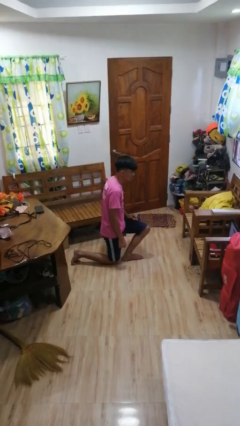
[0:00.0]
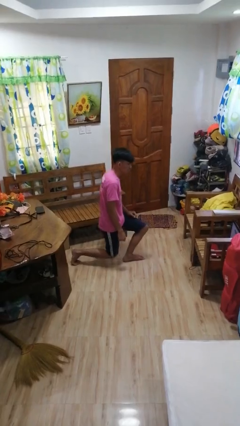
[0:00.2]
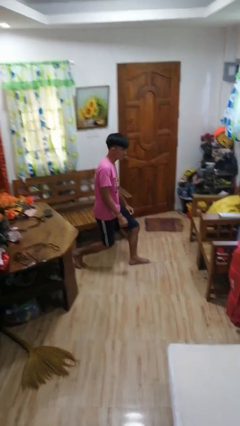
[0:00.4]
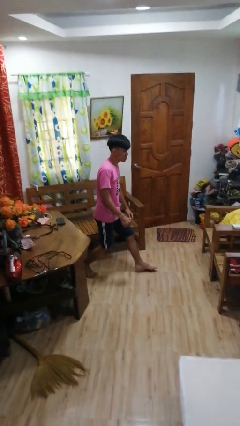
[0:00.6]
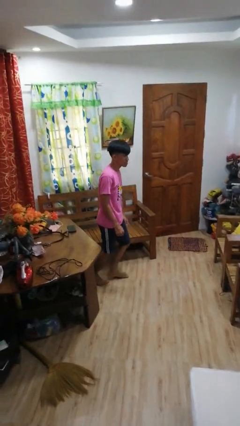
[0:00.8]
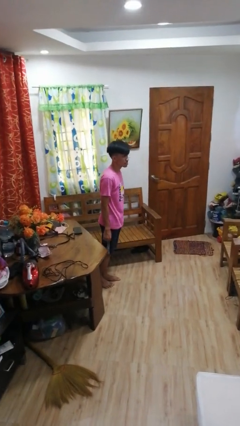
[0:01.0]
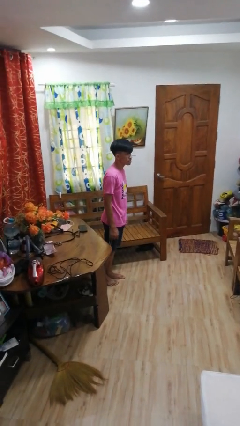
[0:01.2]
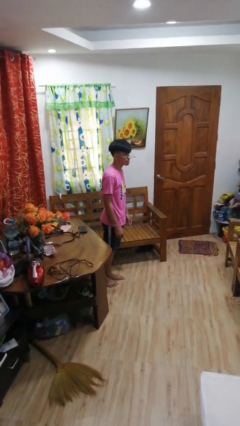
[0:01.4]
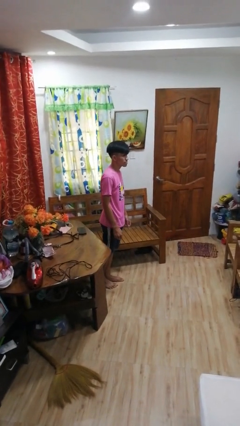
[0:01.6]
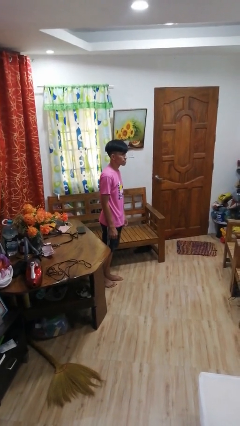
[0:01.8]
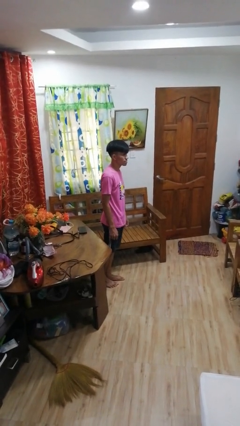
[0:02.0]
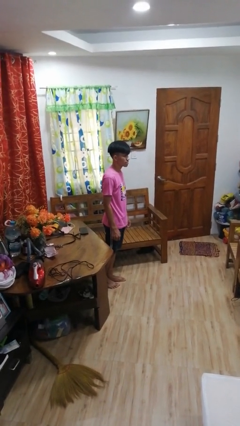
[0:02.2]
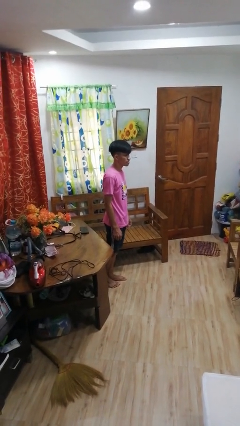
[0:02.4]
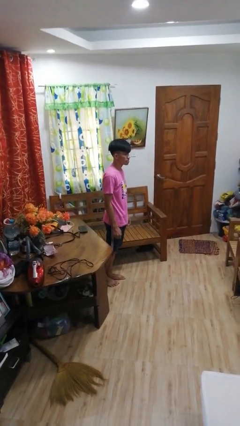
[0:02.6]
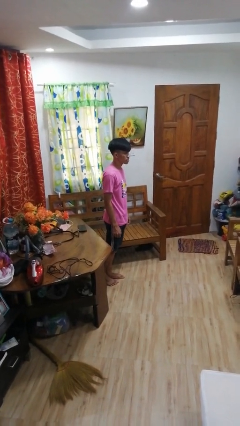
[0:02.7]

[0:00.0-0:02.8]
person stands up from floor

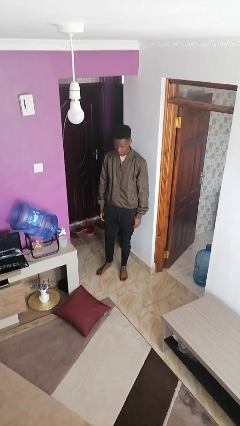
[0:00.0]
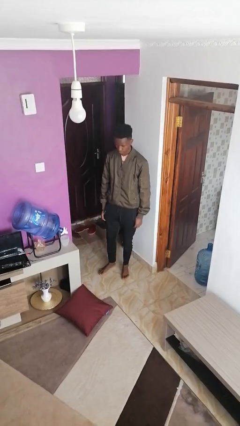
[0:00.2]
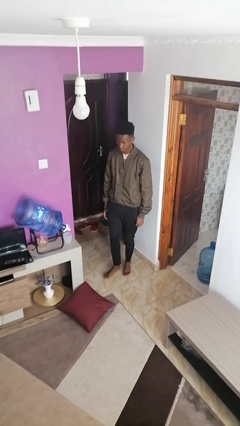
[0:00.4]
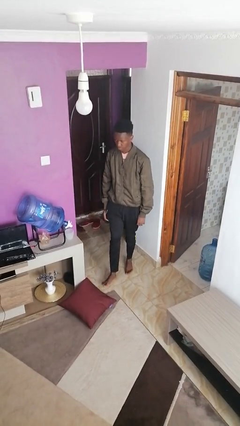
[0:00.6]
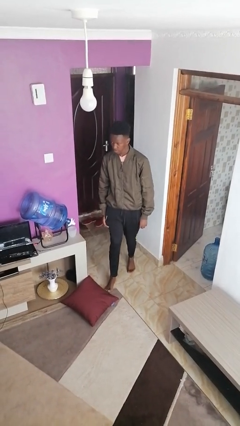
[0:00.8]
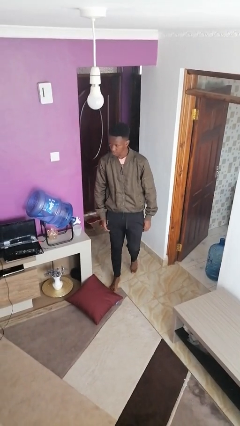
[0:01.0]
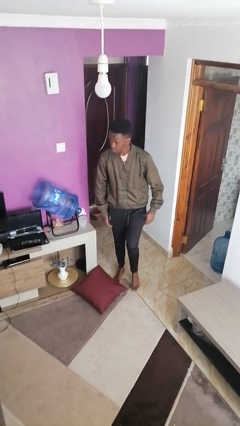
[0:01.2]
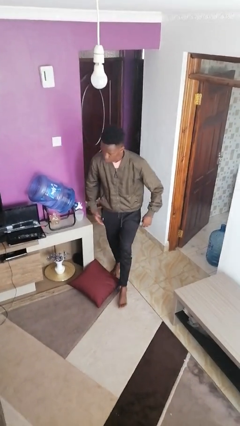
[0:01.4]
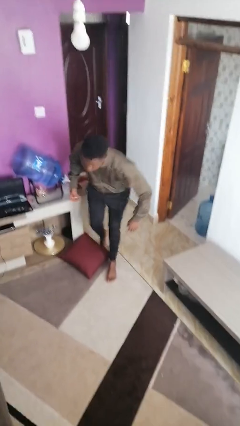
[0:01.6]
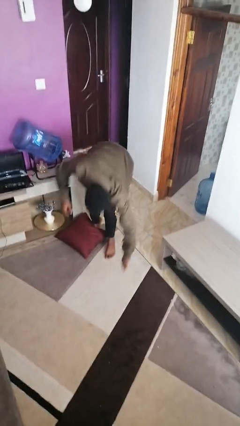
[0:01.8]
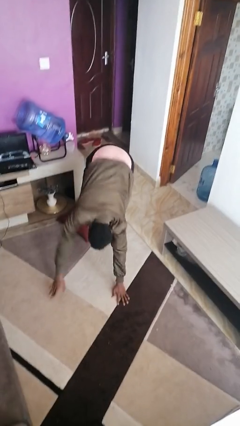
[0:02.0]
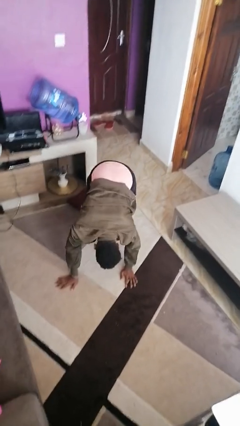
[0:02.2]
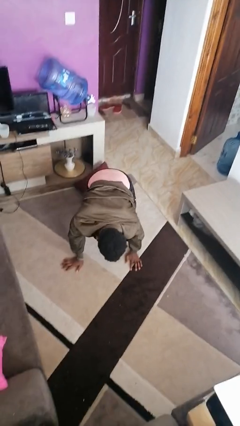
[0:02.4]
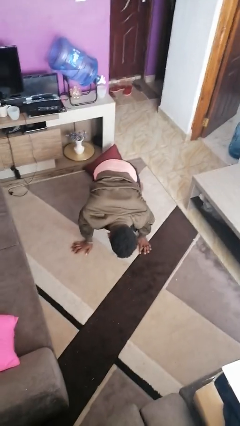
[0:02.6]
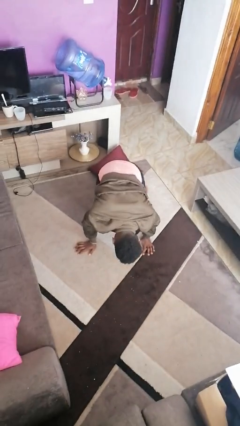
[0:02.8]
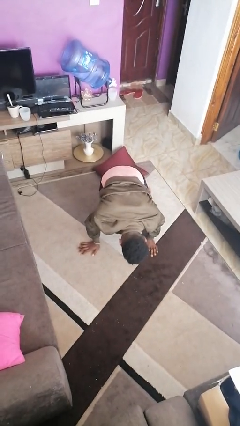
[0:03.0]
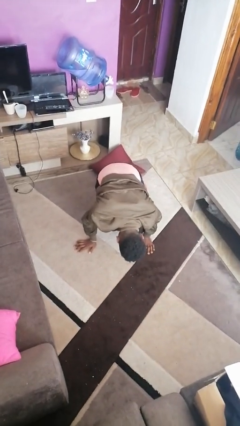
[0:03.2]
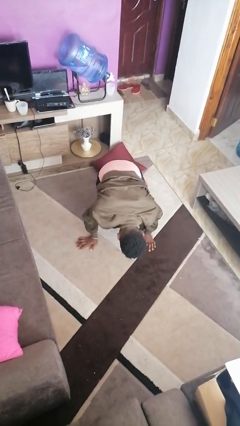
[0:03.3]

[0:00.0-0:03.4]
person trips on object on floor

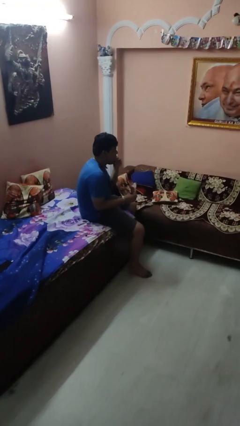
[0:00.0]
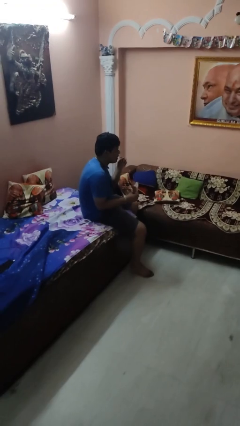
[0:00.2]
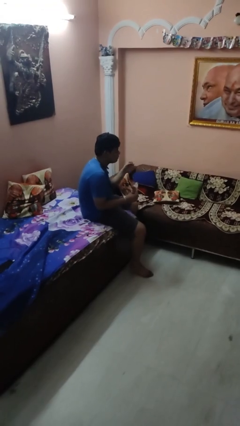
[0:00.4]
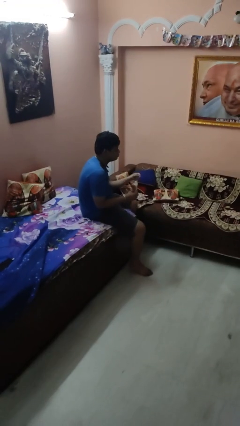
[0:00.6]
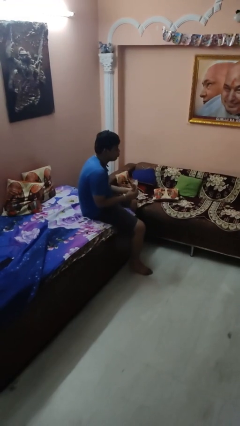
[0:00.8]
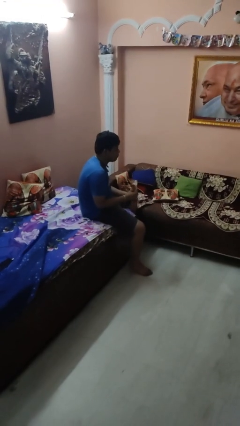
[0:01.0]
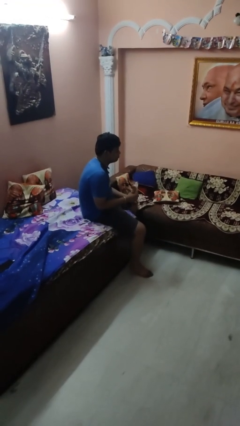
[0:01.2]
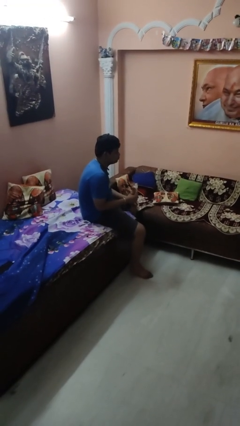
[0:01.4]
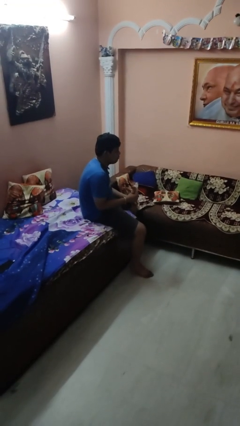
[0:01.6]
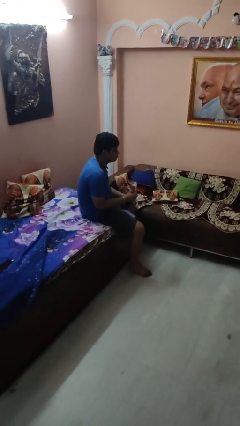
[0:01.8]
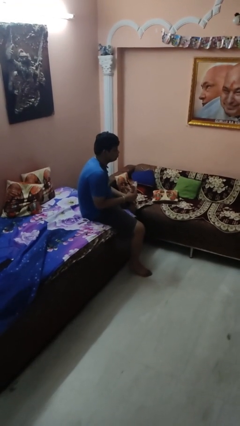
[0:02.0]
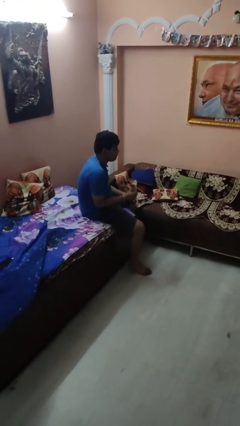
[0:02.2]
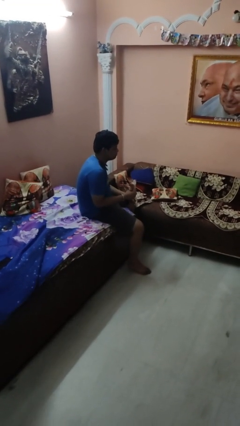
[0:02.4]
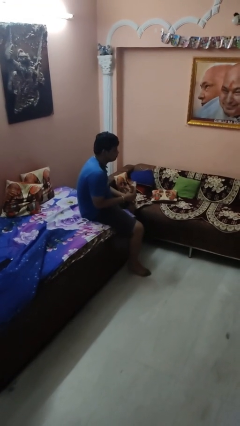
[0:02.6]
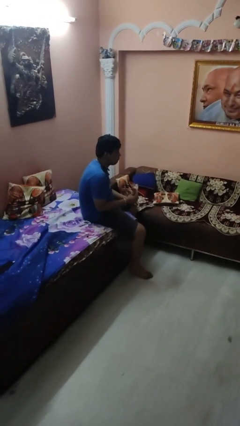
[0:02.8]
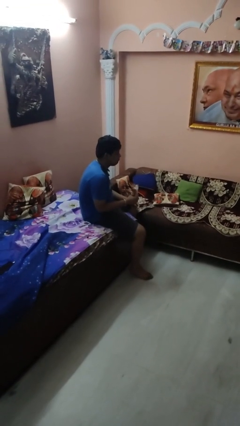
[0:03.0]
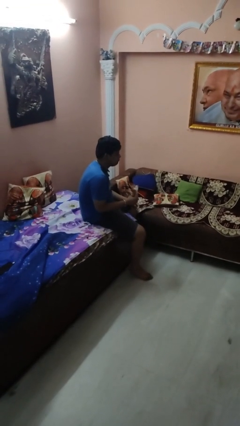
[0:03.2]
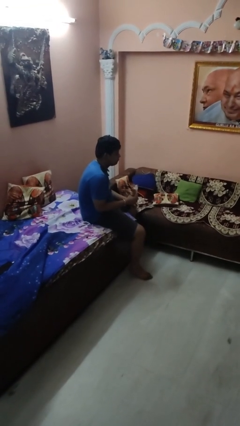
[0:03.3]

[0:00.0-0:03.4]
person eats snack from bag

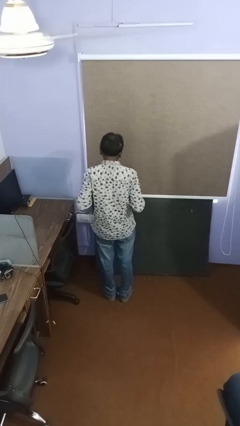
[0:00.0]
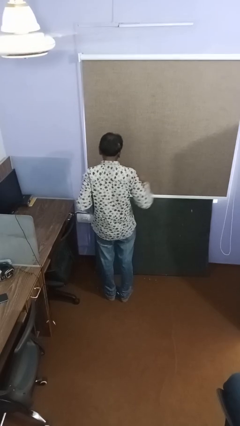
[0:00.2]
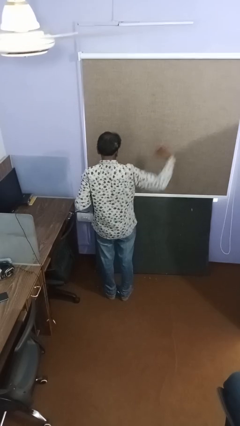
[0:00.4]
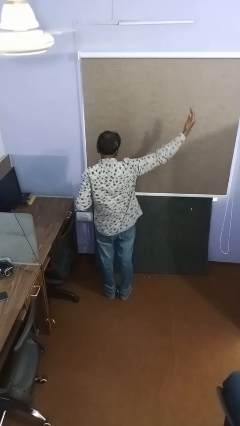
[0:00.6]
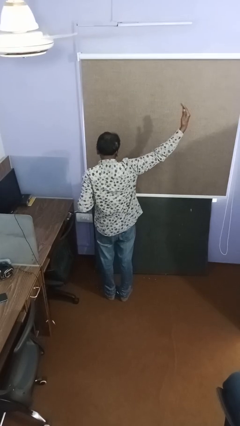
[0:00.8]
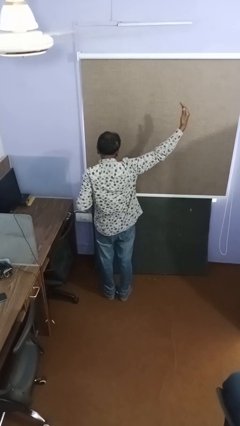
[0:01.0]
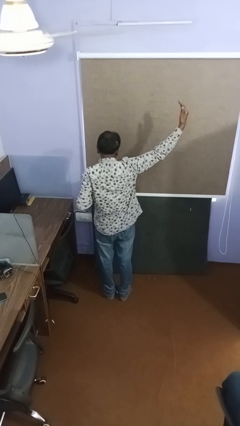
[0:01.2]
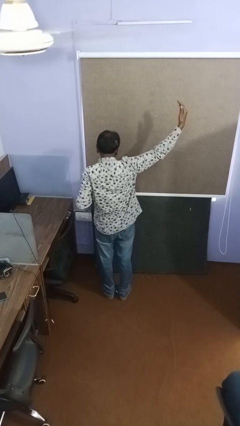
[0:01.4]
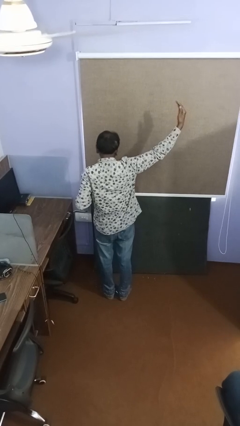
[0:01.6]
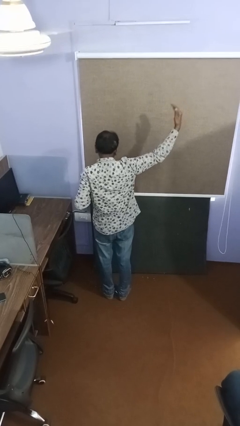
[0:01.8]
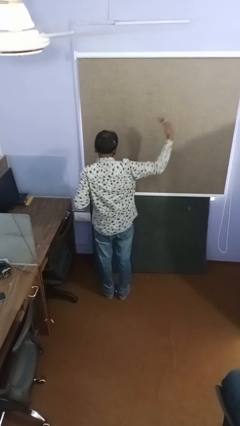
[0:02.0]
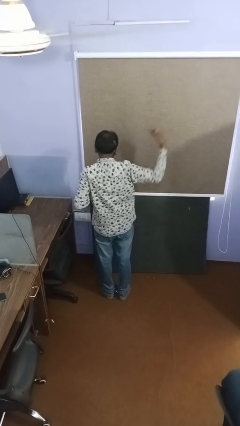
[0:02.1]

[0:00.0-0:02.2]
person gestures swipe right

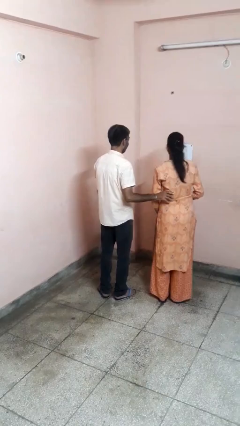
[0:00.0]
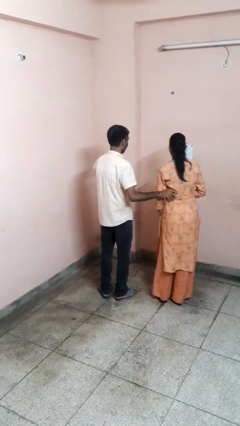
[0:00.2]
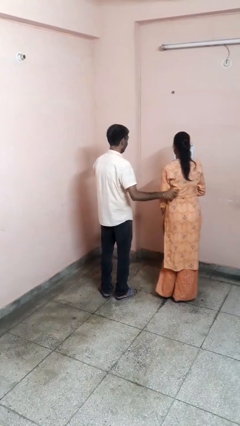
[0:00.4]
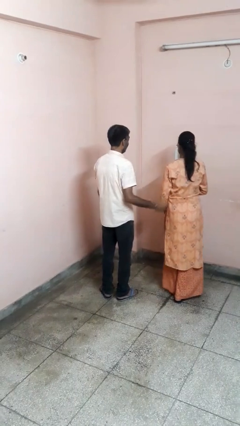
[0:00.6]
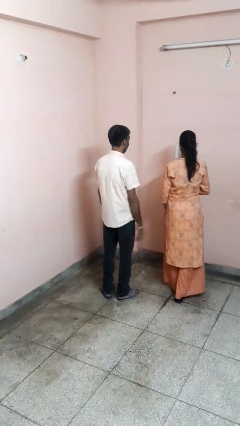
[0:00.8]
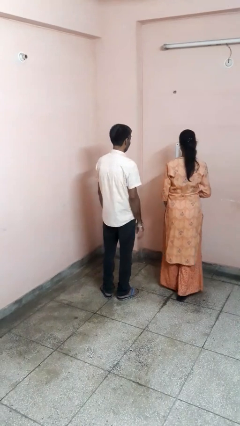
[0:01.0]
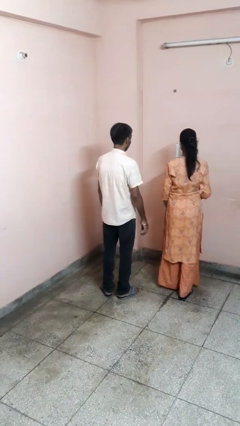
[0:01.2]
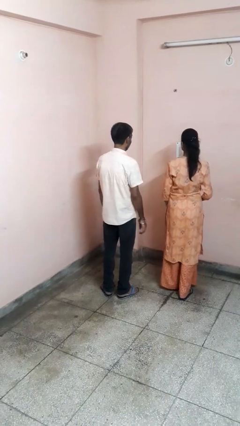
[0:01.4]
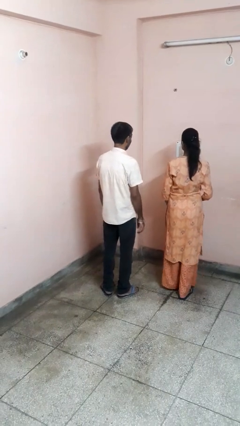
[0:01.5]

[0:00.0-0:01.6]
person tickles person

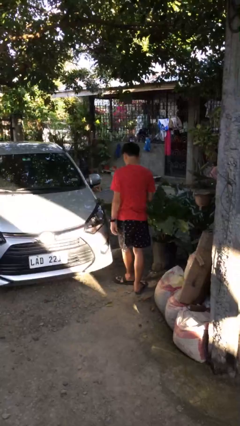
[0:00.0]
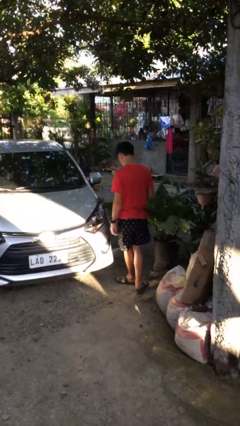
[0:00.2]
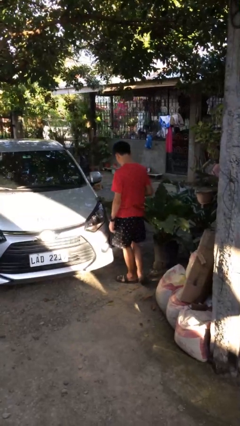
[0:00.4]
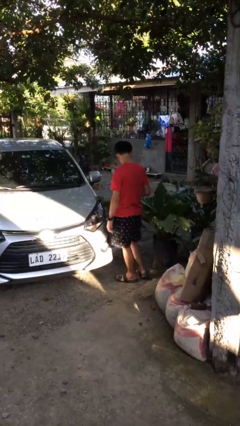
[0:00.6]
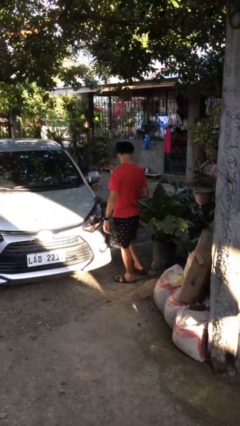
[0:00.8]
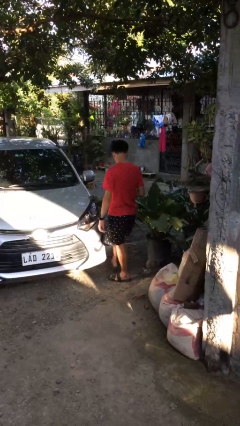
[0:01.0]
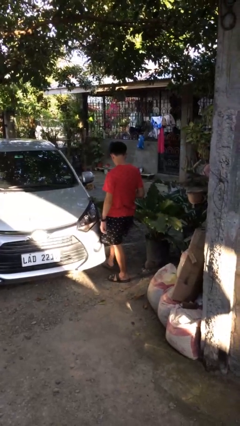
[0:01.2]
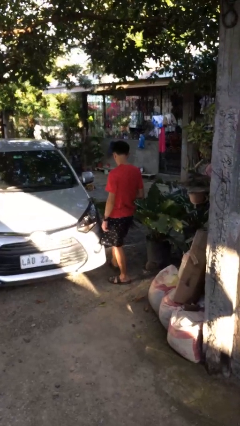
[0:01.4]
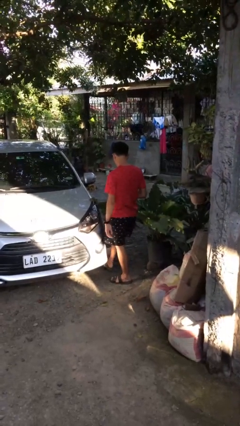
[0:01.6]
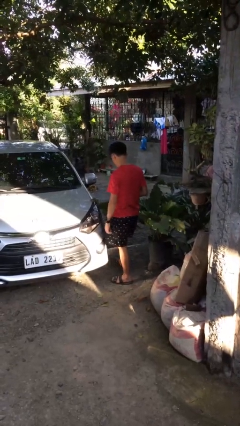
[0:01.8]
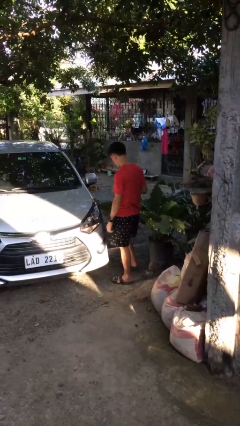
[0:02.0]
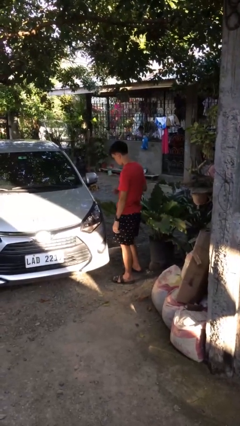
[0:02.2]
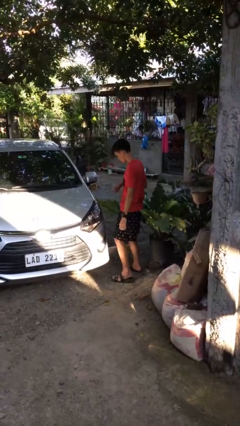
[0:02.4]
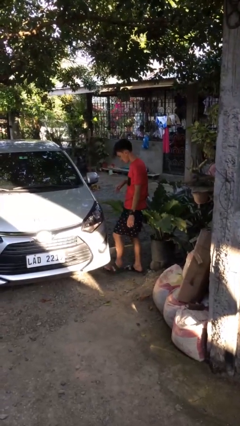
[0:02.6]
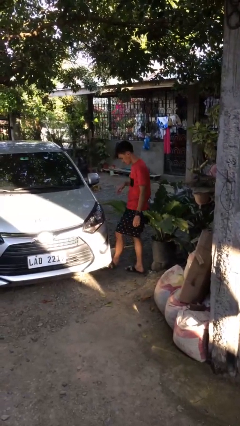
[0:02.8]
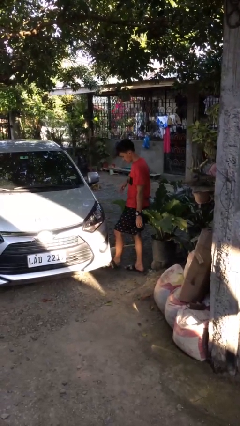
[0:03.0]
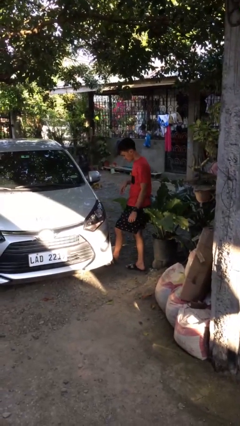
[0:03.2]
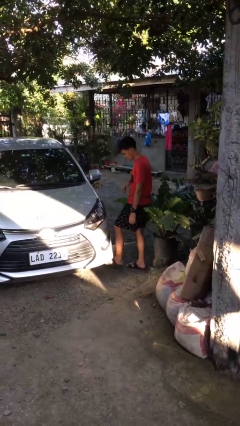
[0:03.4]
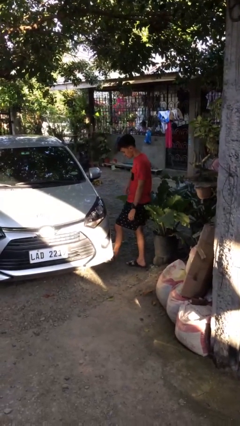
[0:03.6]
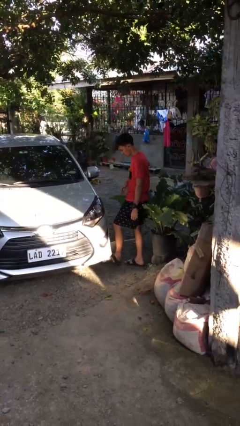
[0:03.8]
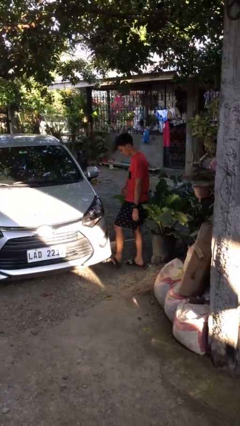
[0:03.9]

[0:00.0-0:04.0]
person kicks car tires
